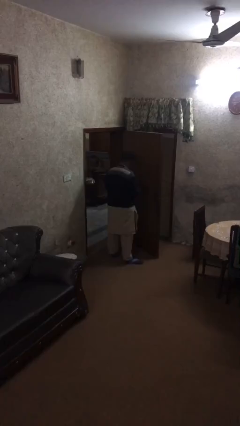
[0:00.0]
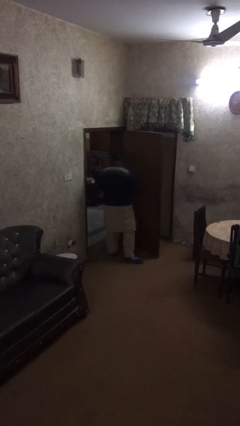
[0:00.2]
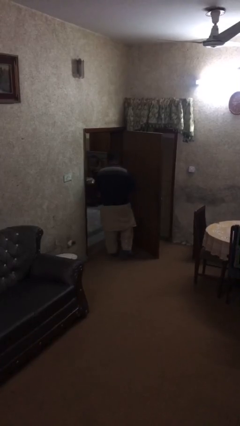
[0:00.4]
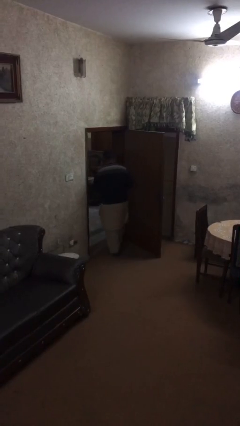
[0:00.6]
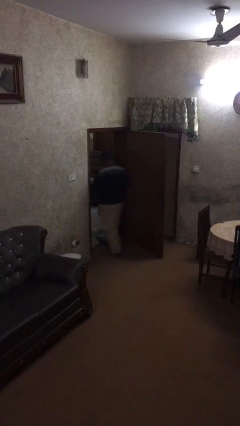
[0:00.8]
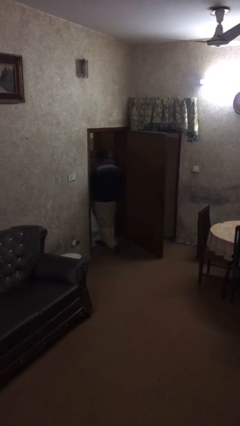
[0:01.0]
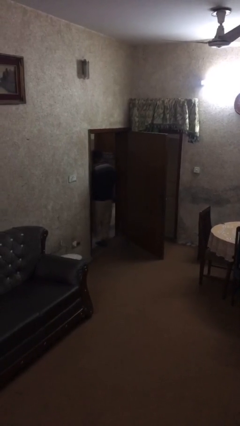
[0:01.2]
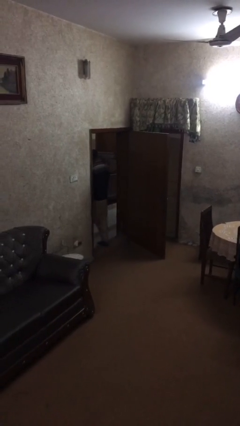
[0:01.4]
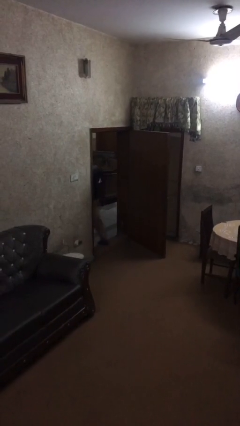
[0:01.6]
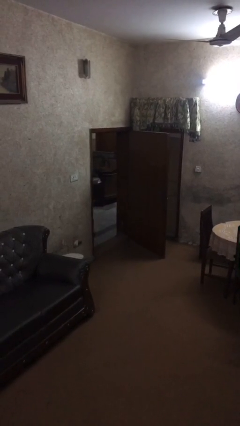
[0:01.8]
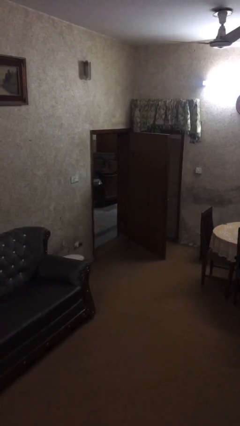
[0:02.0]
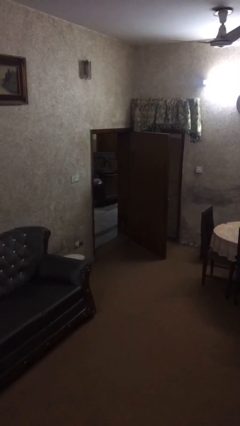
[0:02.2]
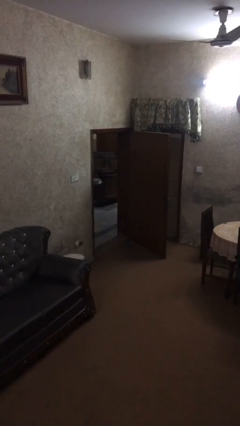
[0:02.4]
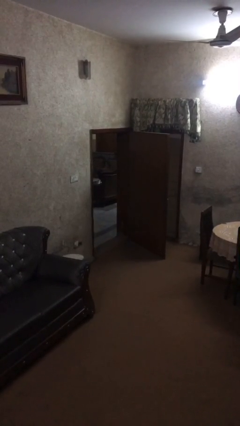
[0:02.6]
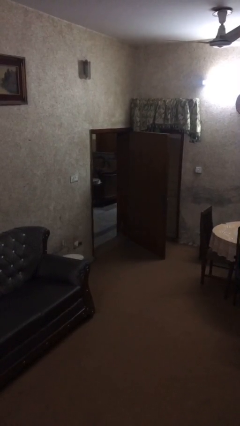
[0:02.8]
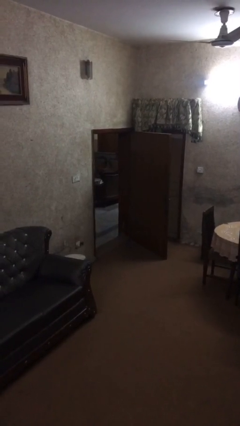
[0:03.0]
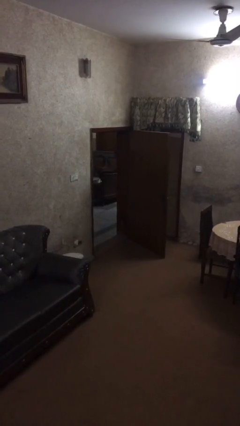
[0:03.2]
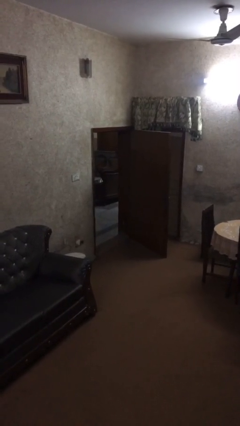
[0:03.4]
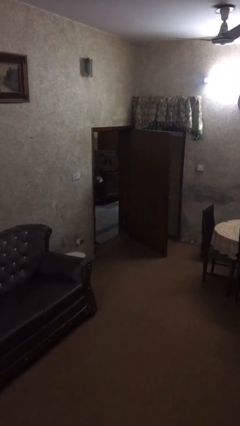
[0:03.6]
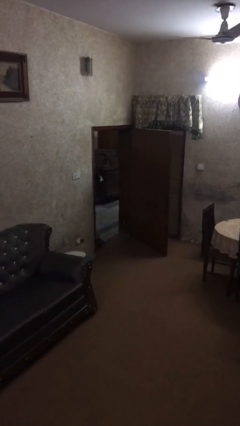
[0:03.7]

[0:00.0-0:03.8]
person exits scene through structure

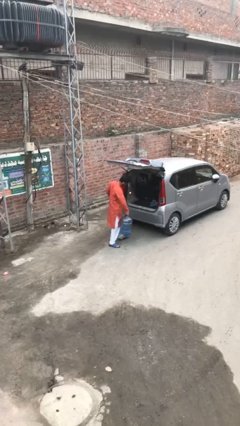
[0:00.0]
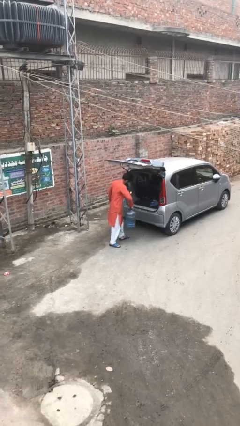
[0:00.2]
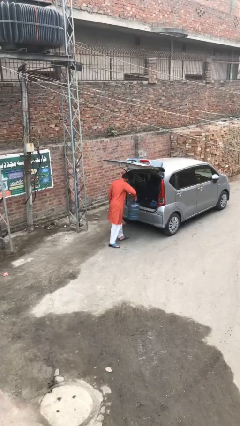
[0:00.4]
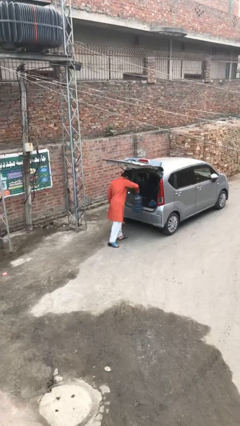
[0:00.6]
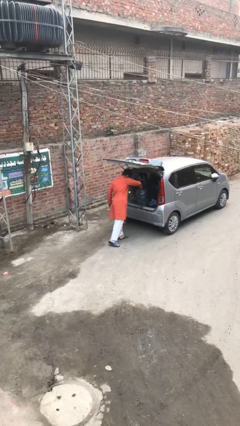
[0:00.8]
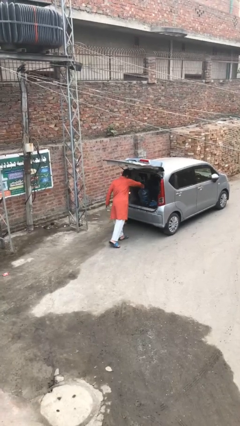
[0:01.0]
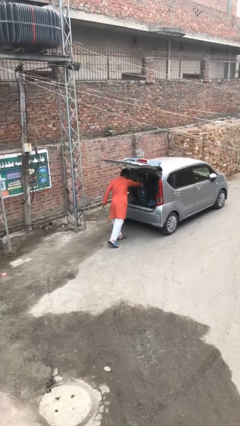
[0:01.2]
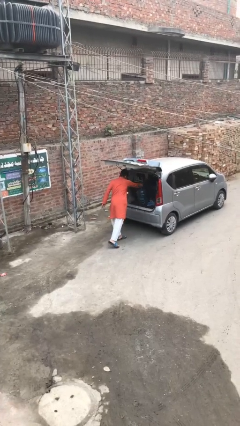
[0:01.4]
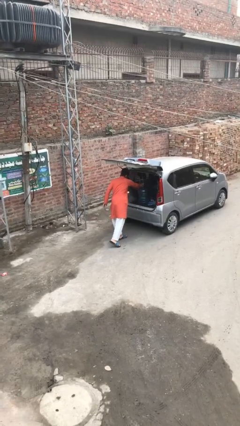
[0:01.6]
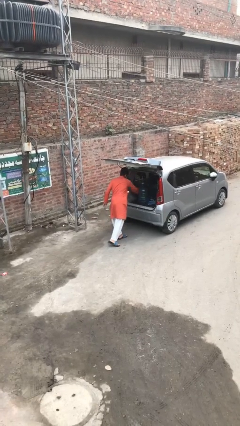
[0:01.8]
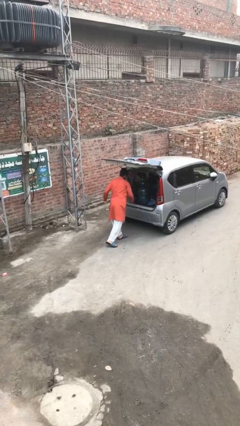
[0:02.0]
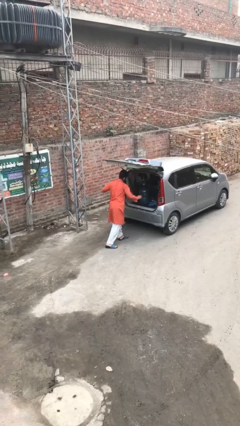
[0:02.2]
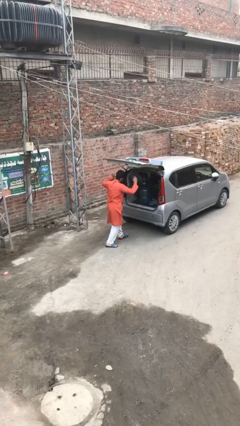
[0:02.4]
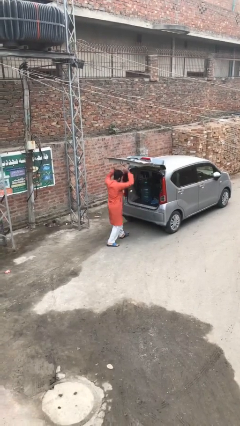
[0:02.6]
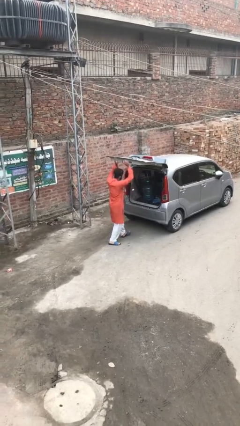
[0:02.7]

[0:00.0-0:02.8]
person loads car

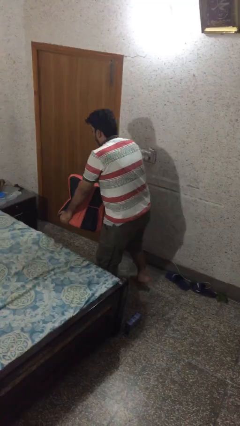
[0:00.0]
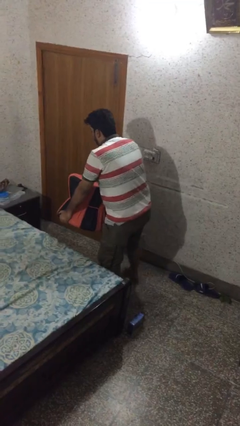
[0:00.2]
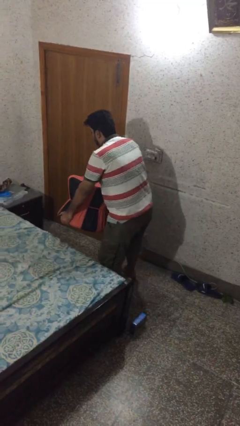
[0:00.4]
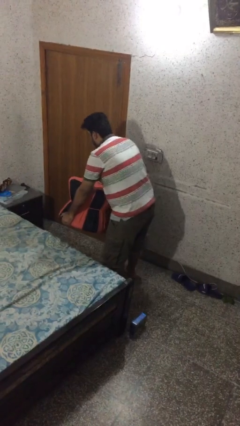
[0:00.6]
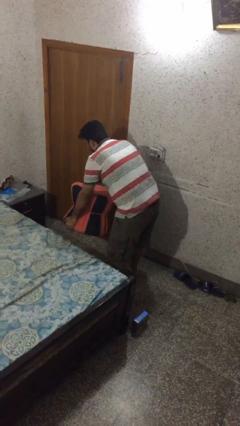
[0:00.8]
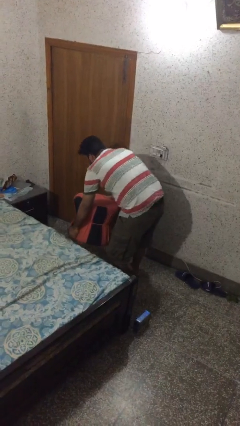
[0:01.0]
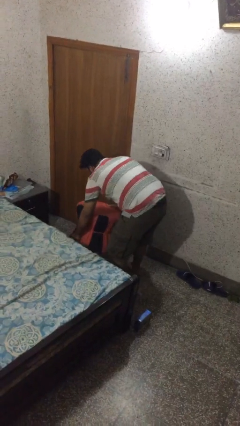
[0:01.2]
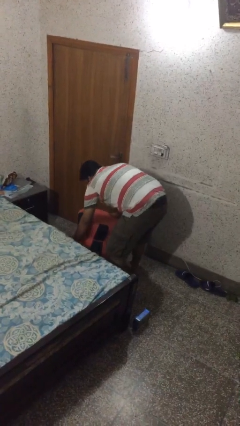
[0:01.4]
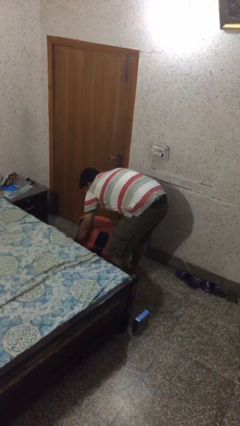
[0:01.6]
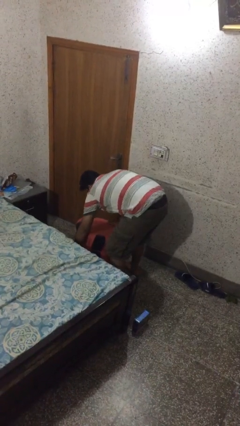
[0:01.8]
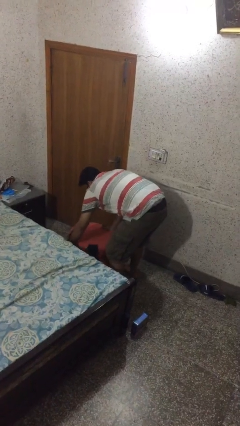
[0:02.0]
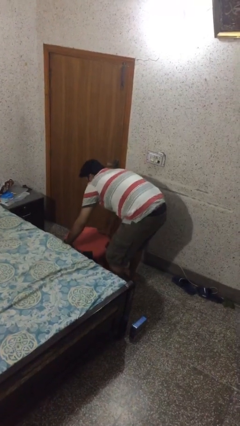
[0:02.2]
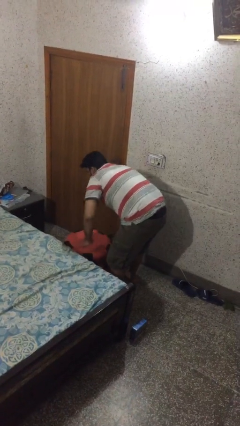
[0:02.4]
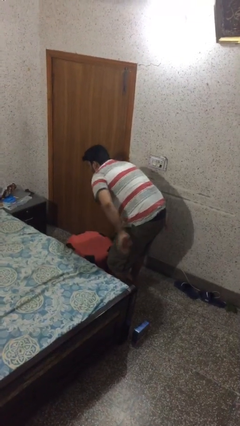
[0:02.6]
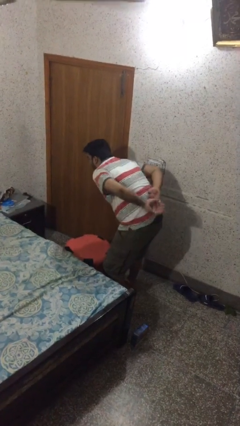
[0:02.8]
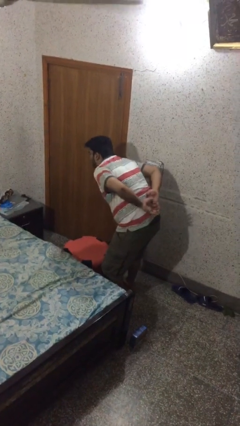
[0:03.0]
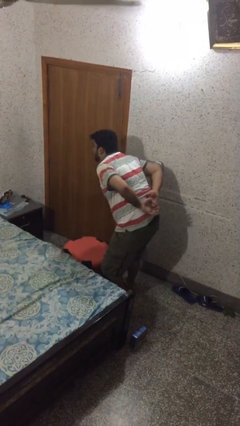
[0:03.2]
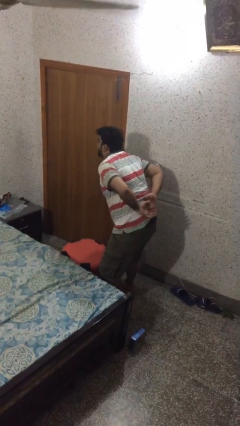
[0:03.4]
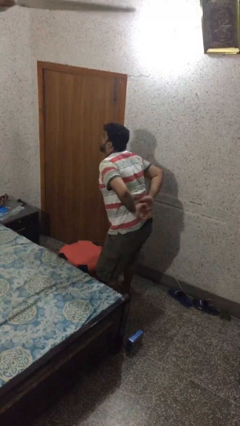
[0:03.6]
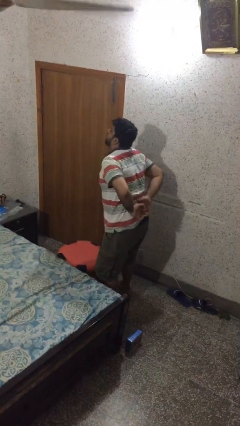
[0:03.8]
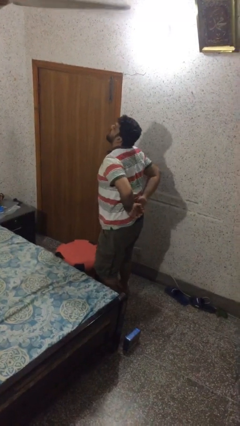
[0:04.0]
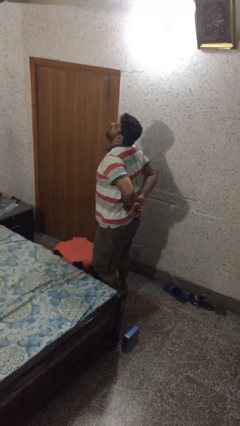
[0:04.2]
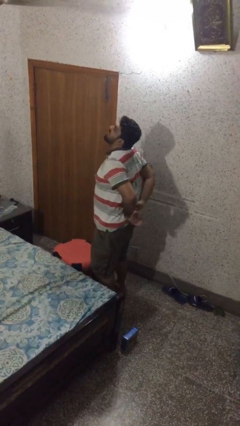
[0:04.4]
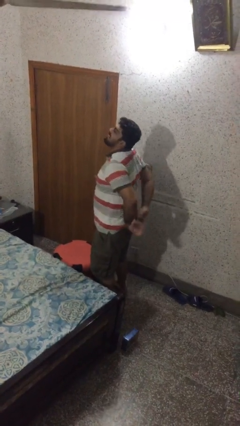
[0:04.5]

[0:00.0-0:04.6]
person puts down object on floor

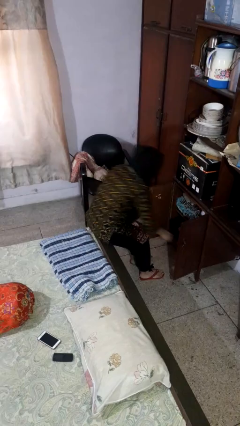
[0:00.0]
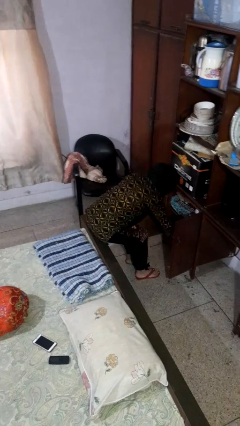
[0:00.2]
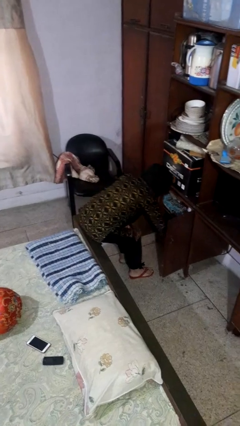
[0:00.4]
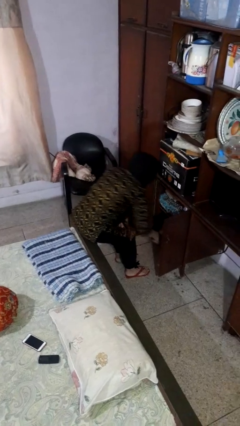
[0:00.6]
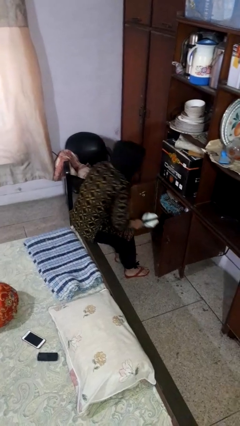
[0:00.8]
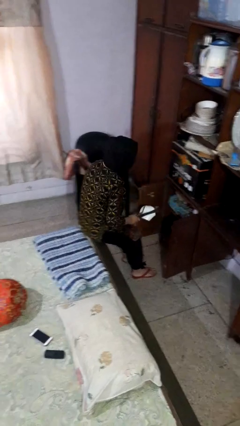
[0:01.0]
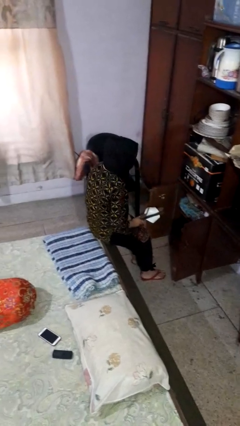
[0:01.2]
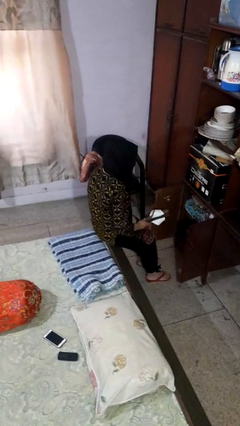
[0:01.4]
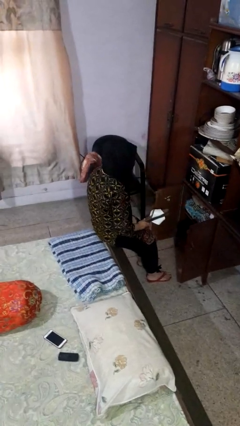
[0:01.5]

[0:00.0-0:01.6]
person takes object from cabinet

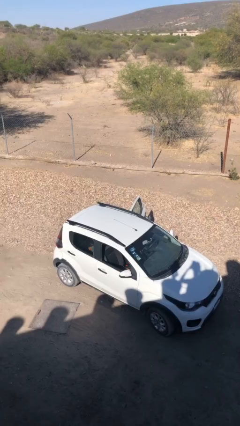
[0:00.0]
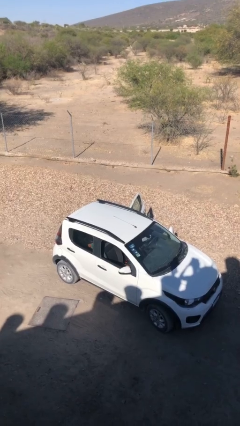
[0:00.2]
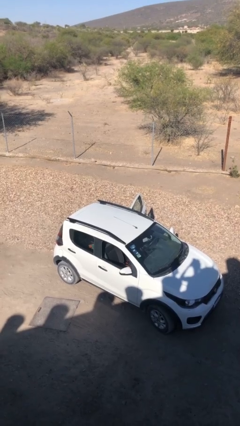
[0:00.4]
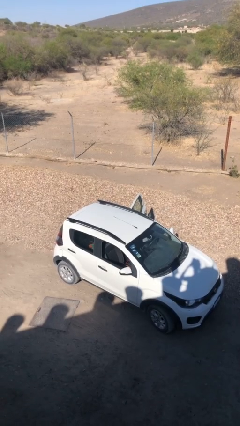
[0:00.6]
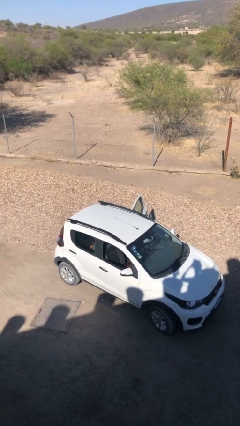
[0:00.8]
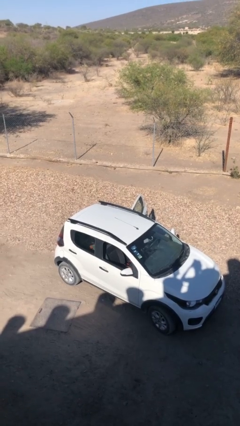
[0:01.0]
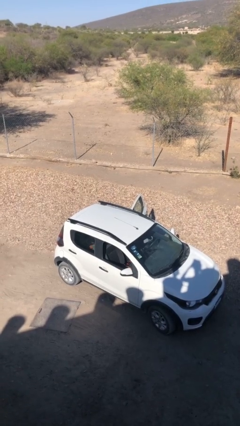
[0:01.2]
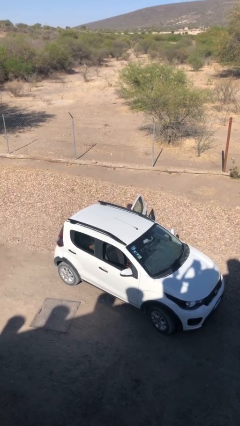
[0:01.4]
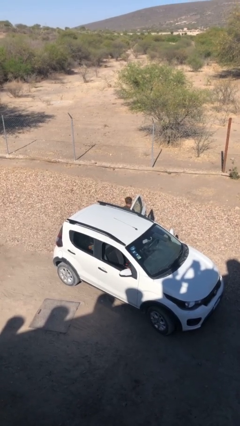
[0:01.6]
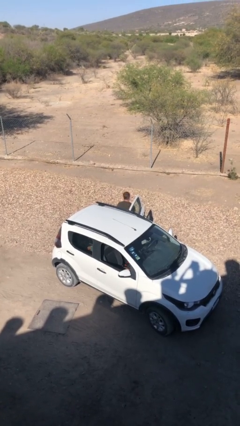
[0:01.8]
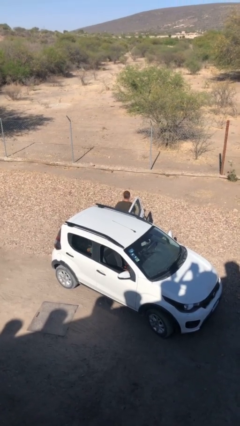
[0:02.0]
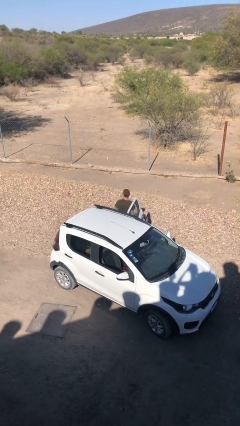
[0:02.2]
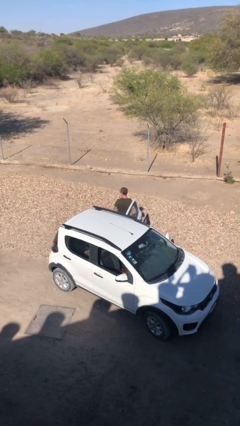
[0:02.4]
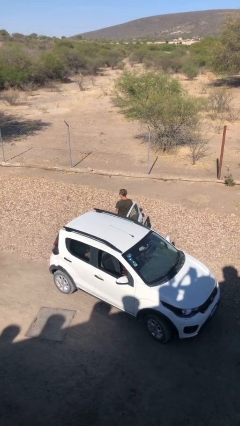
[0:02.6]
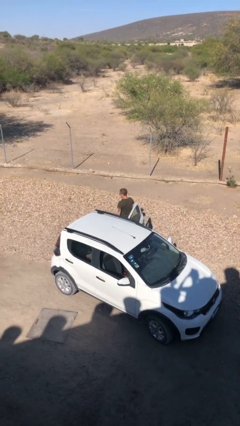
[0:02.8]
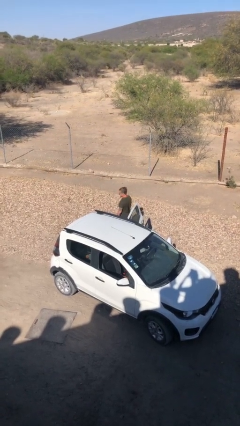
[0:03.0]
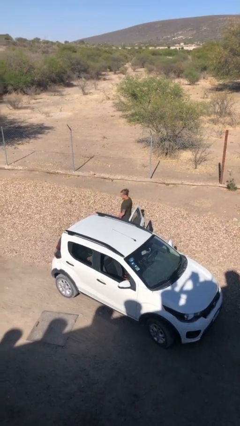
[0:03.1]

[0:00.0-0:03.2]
person exits car

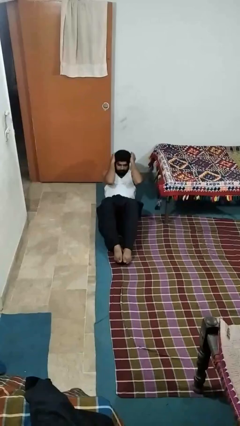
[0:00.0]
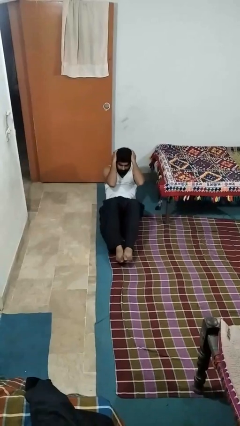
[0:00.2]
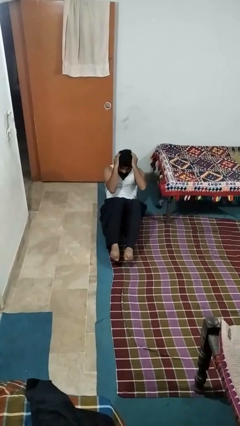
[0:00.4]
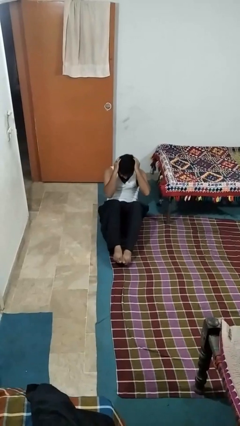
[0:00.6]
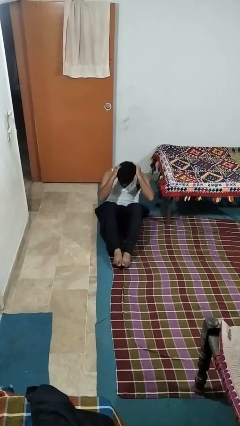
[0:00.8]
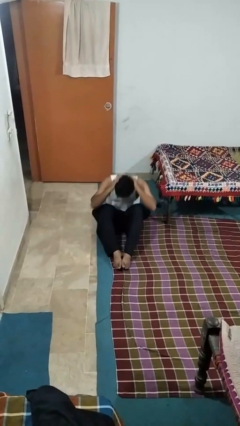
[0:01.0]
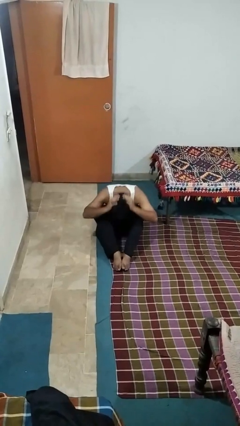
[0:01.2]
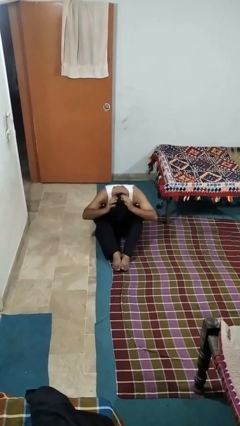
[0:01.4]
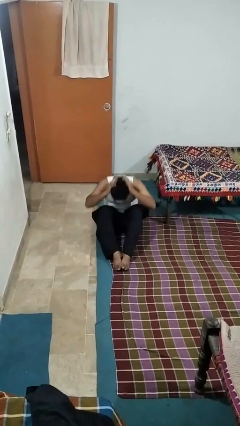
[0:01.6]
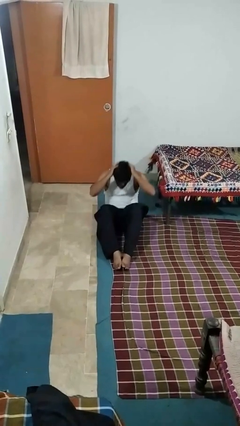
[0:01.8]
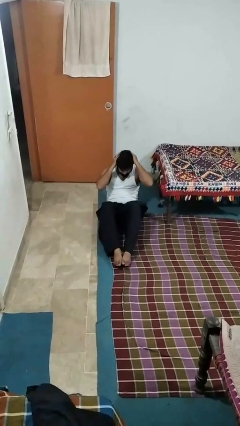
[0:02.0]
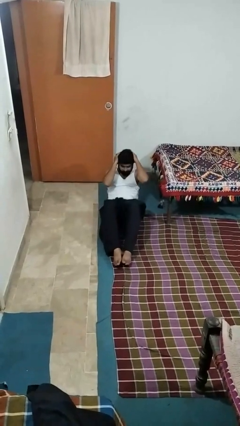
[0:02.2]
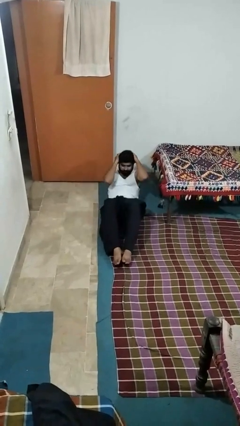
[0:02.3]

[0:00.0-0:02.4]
person exercises with situp
